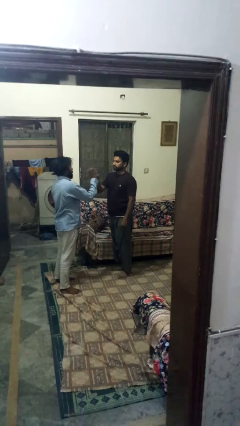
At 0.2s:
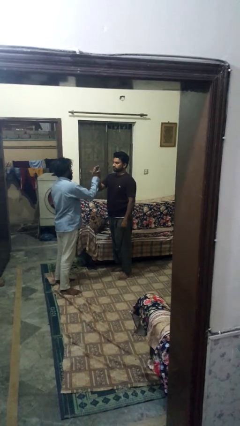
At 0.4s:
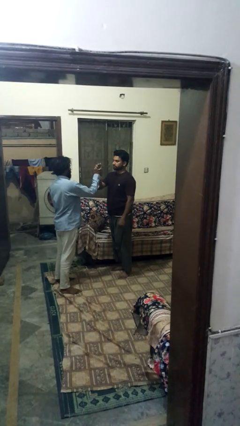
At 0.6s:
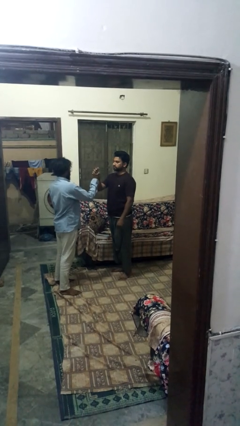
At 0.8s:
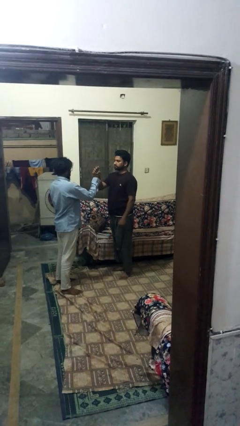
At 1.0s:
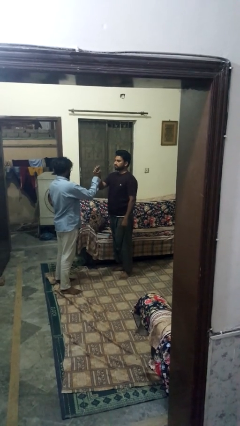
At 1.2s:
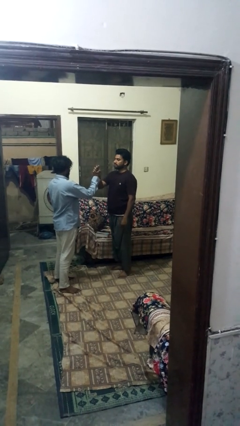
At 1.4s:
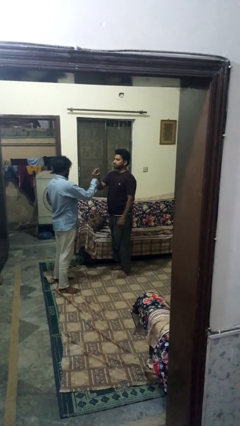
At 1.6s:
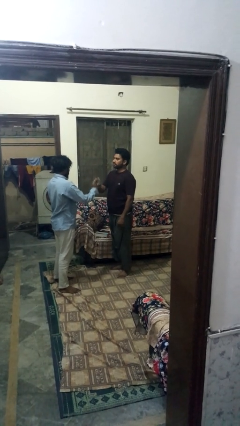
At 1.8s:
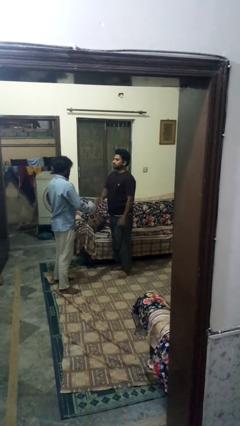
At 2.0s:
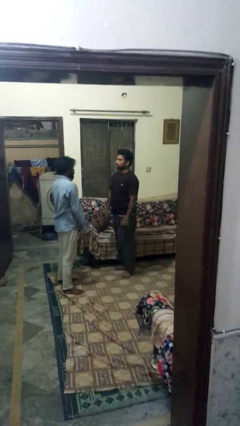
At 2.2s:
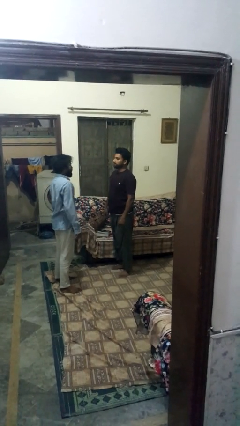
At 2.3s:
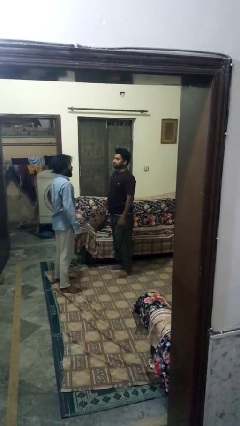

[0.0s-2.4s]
person highfives hand

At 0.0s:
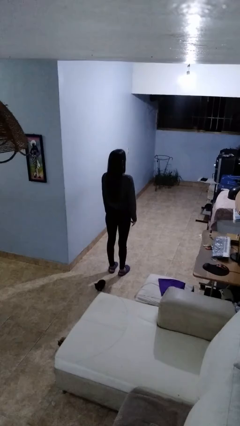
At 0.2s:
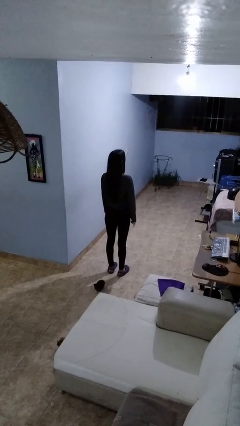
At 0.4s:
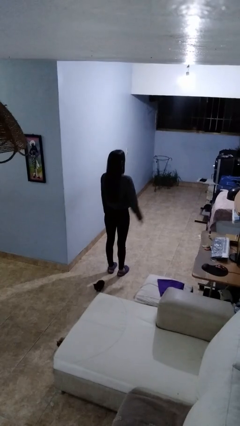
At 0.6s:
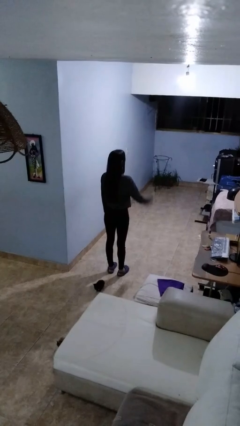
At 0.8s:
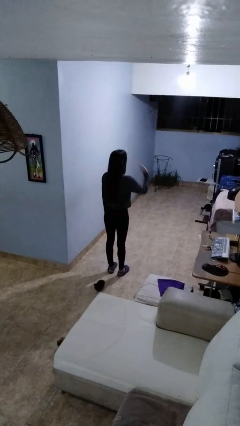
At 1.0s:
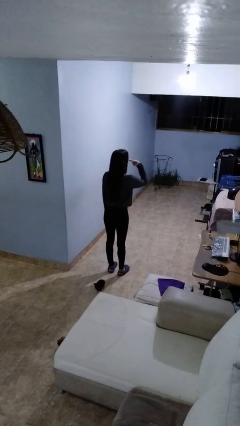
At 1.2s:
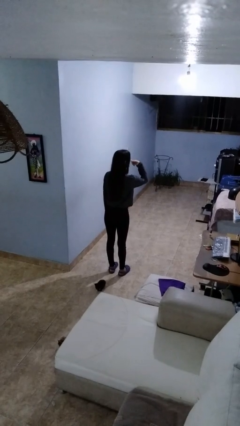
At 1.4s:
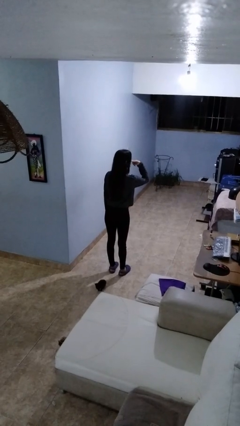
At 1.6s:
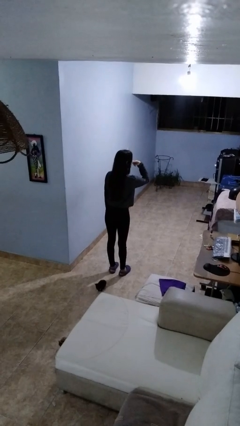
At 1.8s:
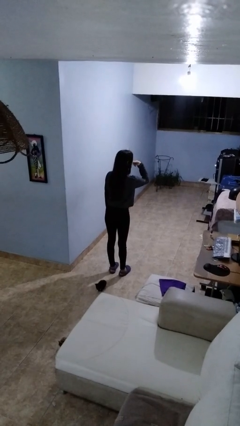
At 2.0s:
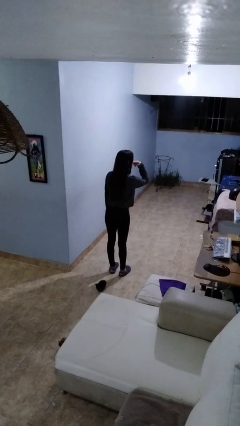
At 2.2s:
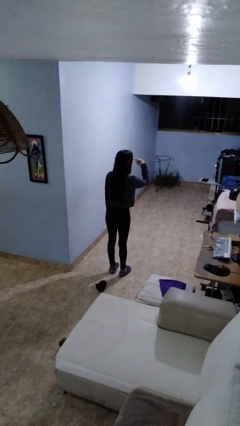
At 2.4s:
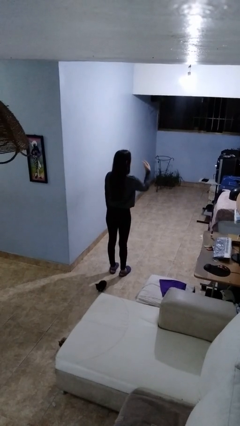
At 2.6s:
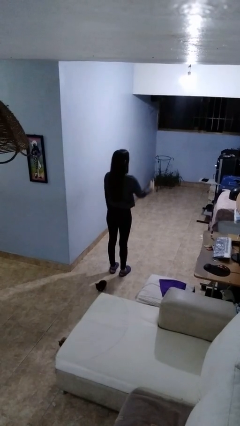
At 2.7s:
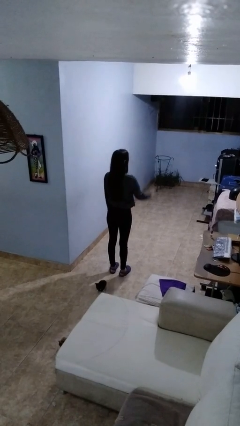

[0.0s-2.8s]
person gestures watch closely

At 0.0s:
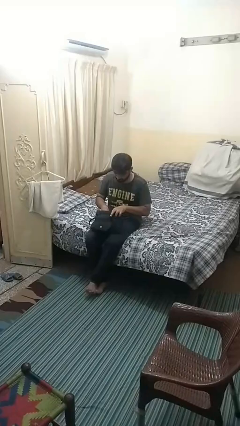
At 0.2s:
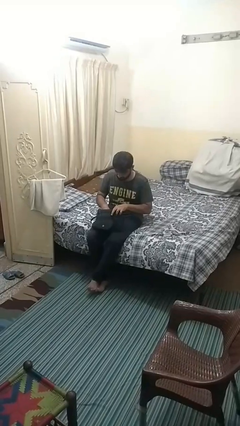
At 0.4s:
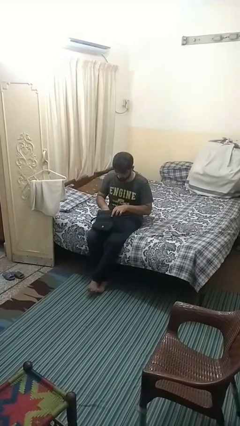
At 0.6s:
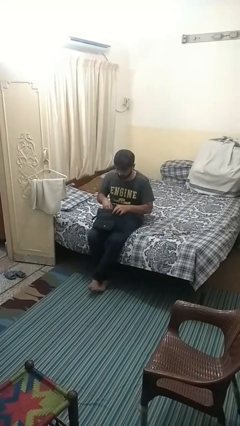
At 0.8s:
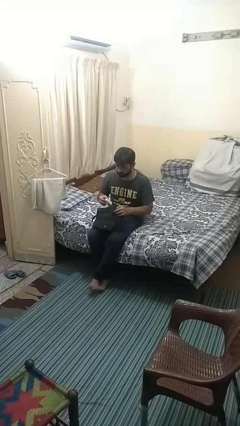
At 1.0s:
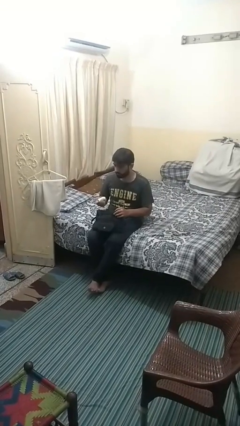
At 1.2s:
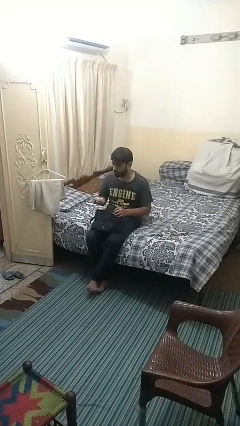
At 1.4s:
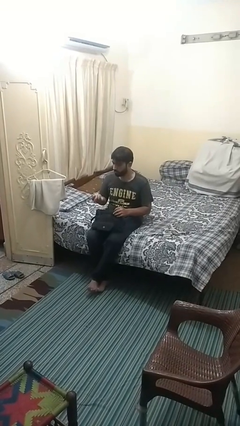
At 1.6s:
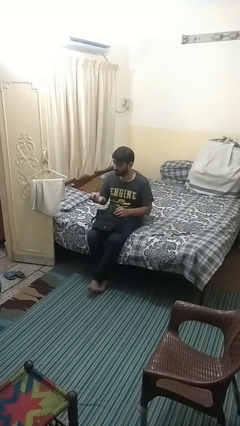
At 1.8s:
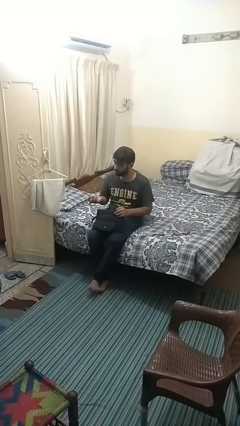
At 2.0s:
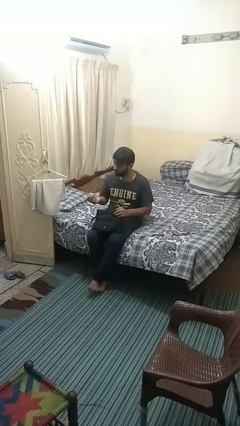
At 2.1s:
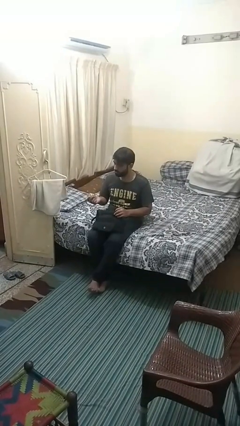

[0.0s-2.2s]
person takes object from purse

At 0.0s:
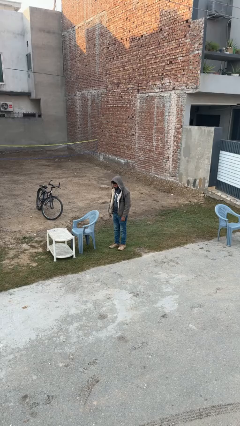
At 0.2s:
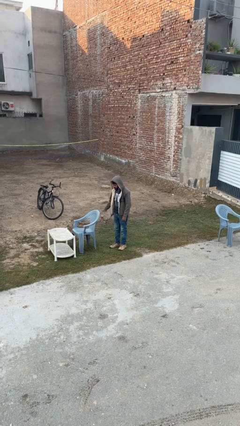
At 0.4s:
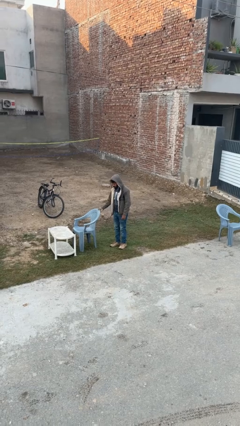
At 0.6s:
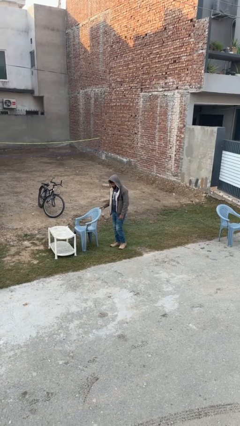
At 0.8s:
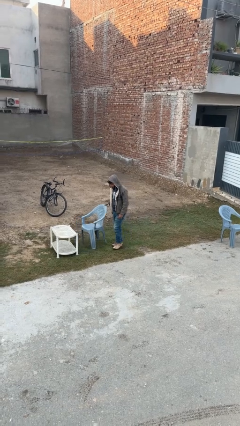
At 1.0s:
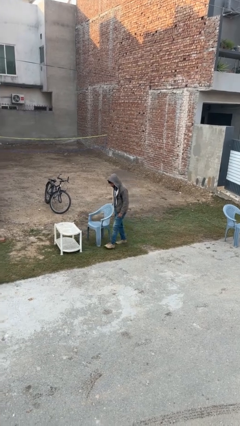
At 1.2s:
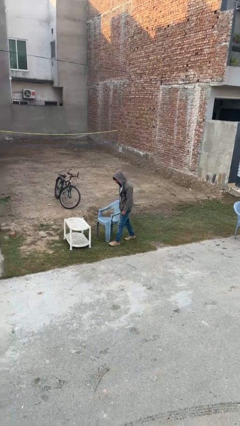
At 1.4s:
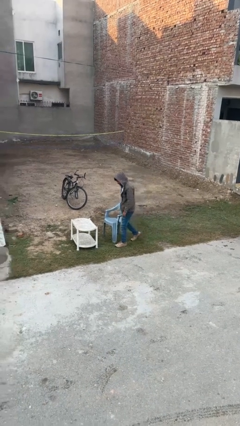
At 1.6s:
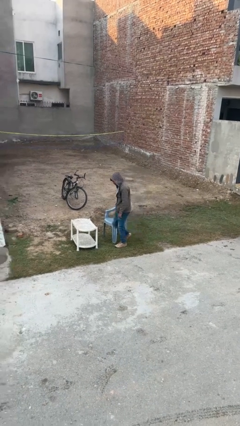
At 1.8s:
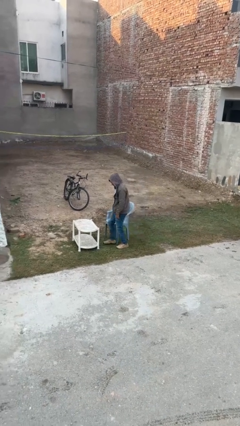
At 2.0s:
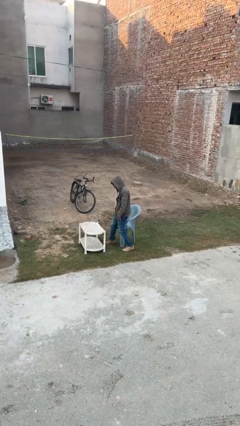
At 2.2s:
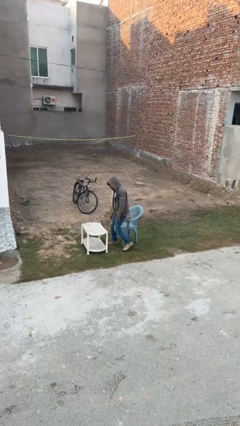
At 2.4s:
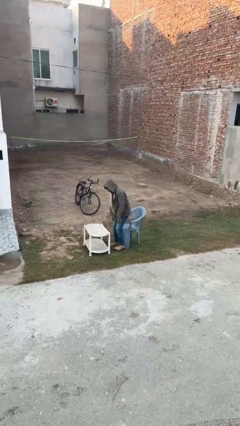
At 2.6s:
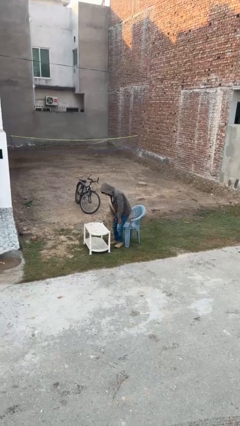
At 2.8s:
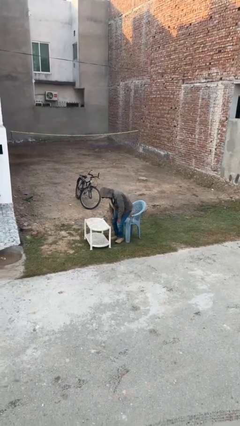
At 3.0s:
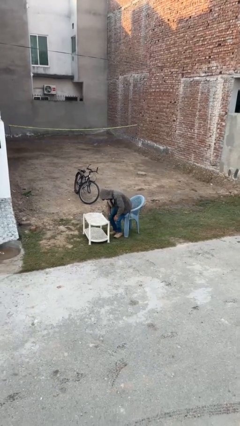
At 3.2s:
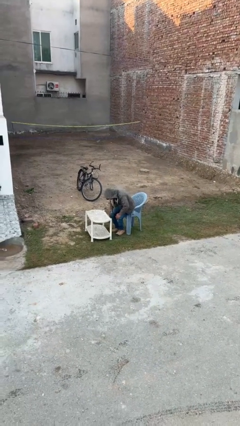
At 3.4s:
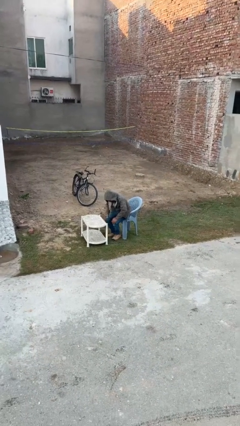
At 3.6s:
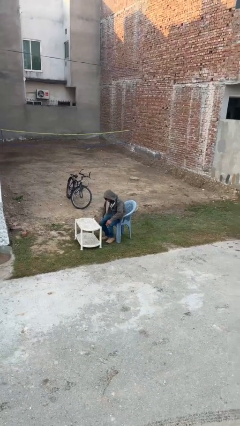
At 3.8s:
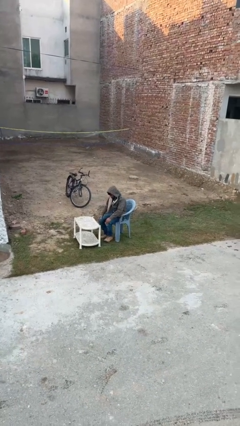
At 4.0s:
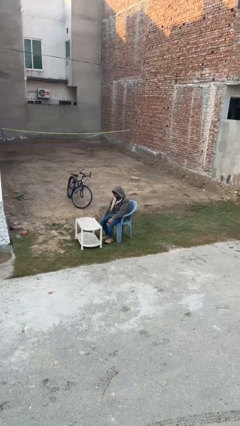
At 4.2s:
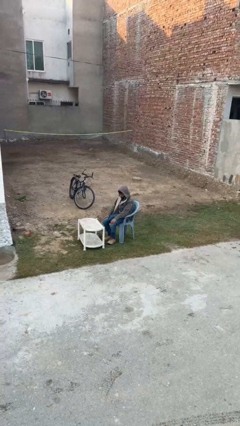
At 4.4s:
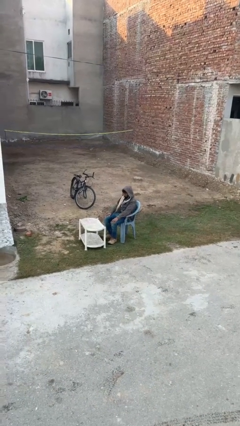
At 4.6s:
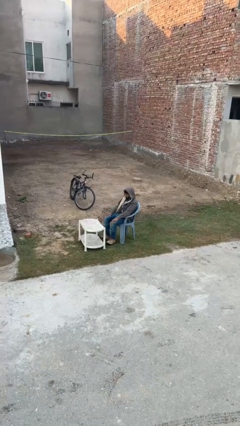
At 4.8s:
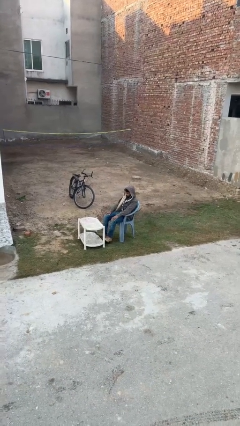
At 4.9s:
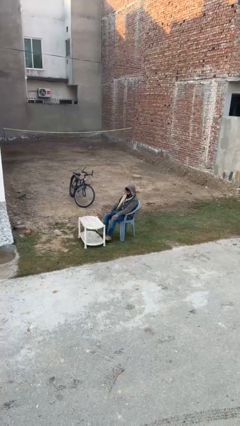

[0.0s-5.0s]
person sits down

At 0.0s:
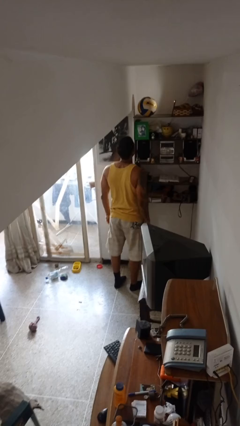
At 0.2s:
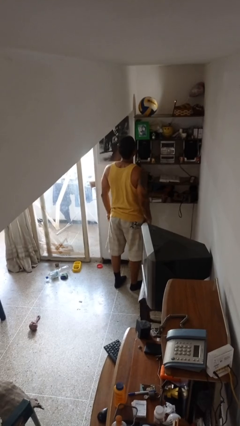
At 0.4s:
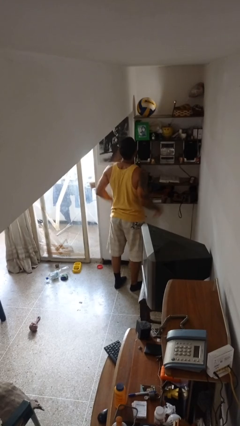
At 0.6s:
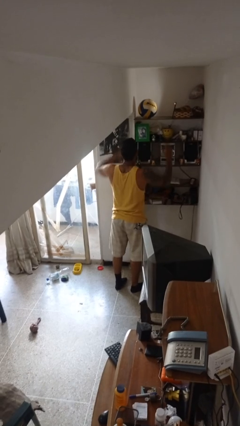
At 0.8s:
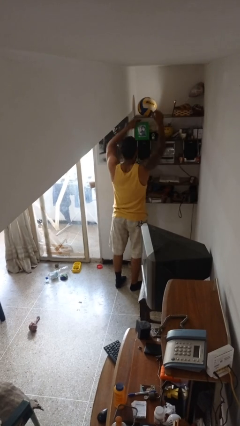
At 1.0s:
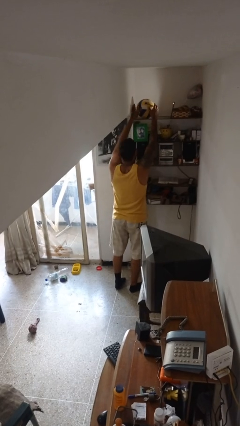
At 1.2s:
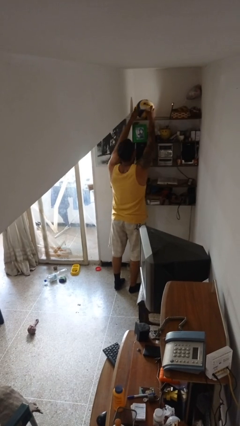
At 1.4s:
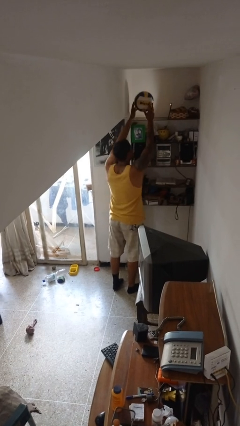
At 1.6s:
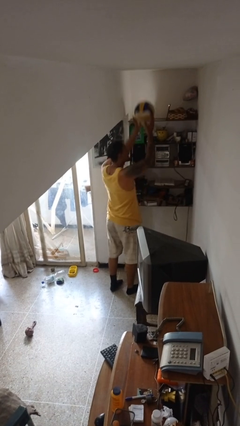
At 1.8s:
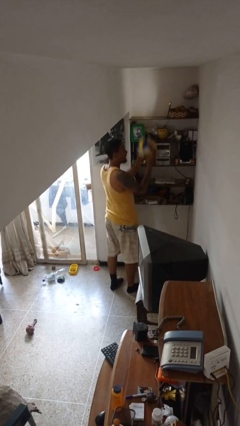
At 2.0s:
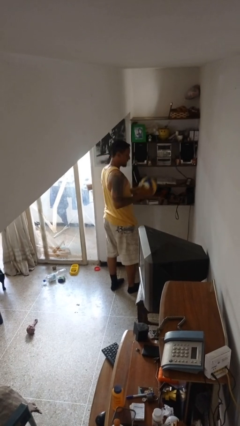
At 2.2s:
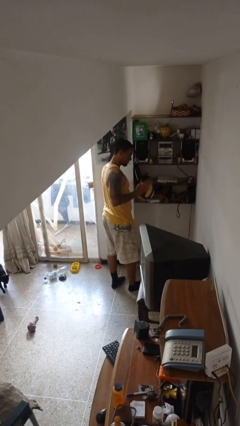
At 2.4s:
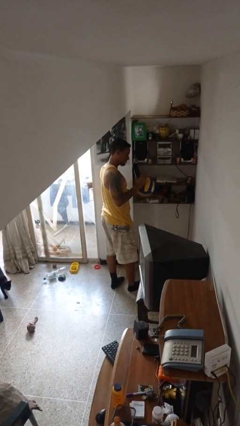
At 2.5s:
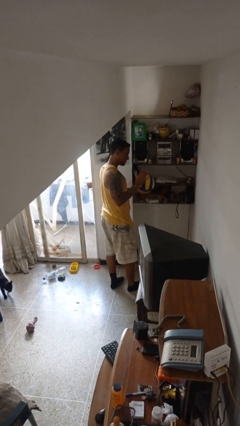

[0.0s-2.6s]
person picks up object from shelf

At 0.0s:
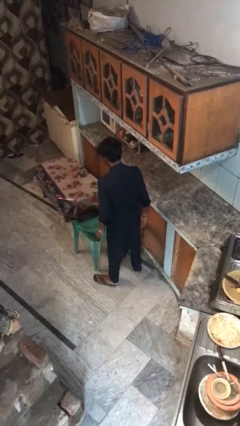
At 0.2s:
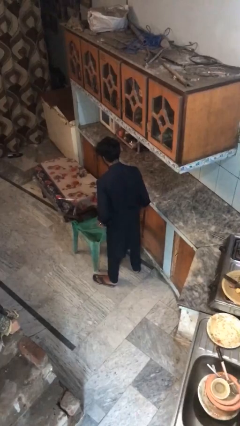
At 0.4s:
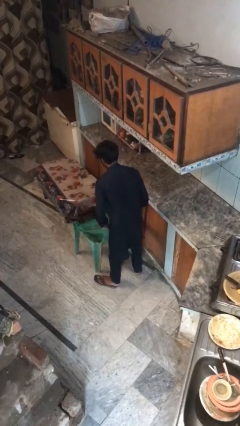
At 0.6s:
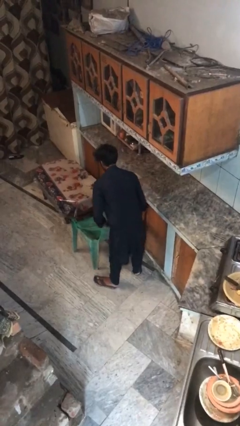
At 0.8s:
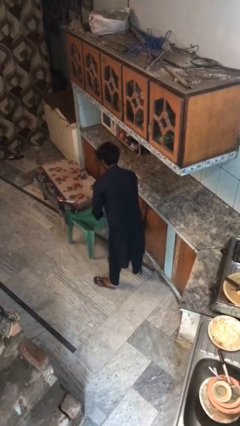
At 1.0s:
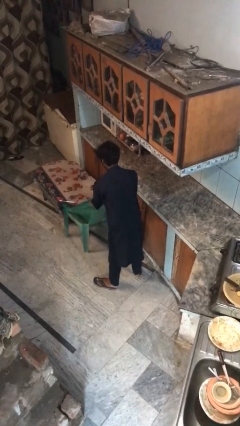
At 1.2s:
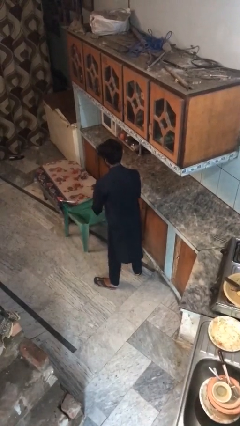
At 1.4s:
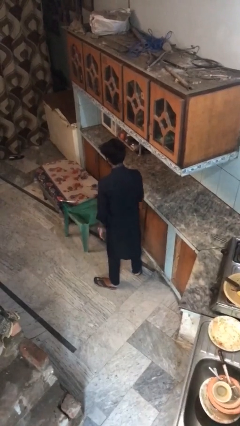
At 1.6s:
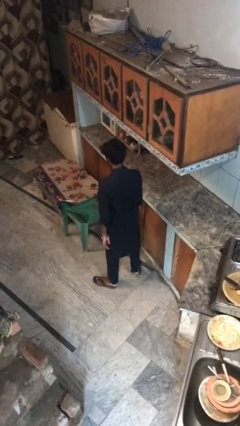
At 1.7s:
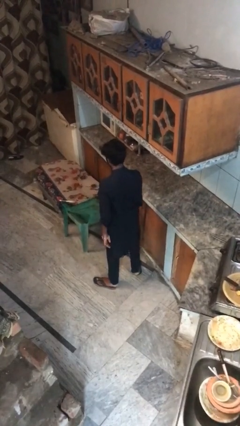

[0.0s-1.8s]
person pushes in chair

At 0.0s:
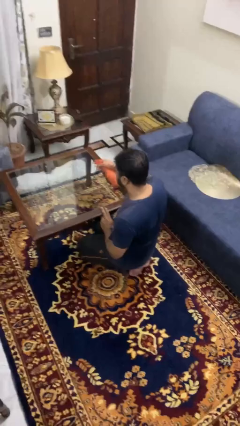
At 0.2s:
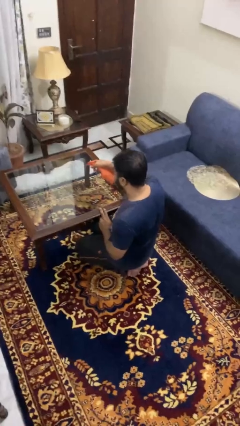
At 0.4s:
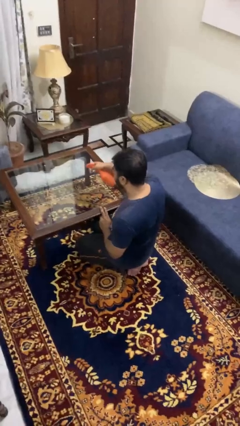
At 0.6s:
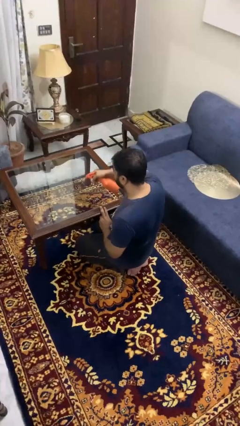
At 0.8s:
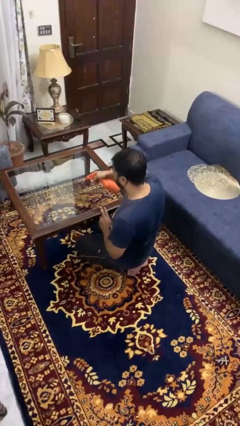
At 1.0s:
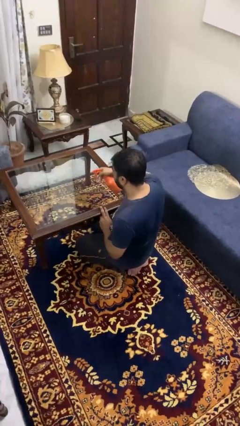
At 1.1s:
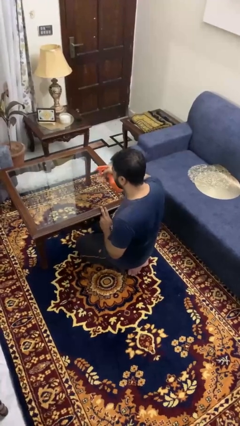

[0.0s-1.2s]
person sprays from bottle
